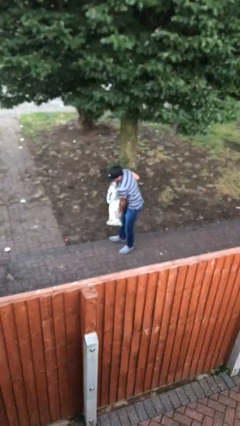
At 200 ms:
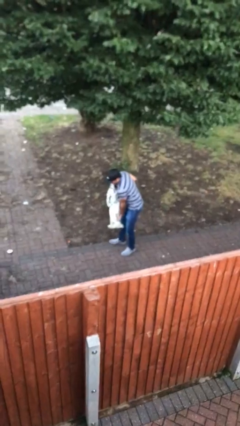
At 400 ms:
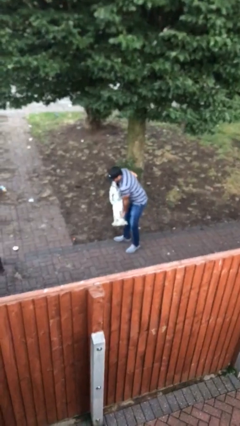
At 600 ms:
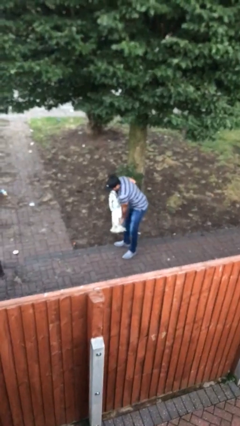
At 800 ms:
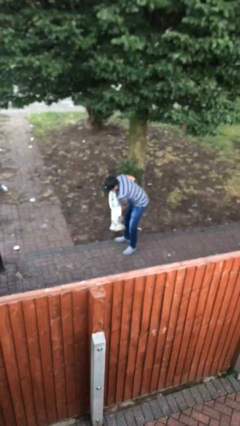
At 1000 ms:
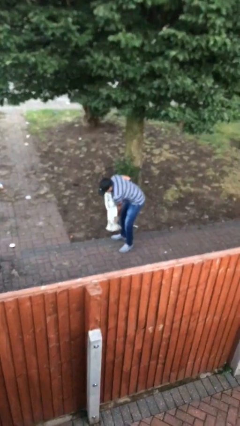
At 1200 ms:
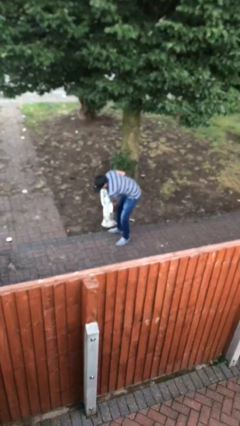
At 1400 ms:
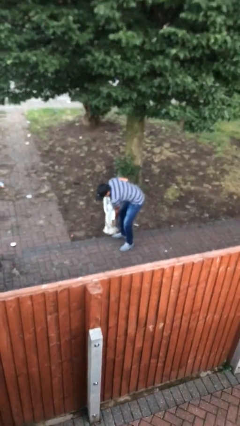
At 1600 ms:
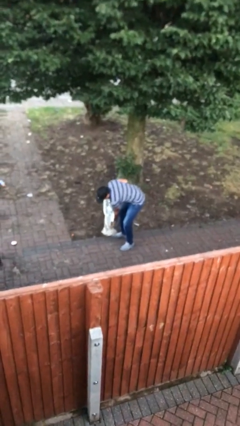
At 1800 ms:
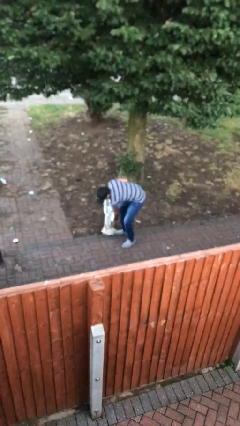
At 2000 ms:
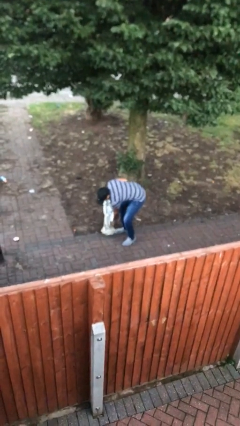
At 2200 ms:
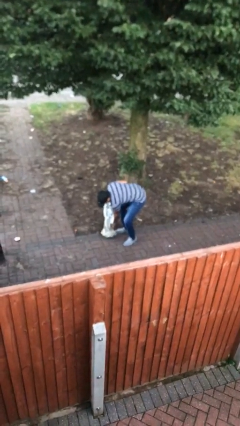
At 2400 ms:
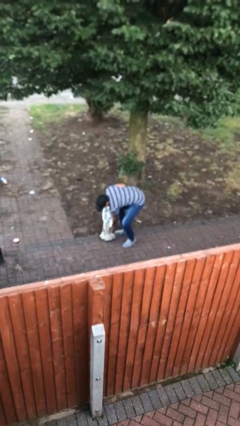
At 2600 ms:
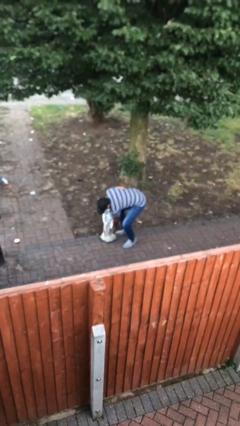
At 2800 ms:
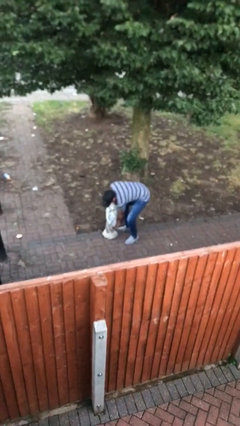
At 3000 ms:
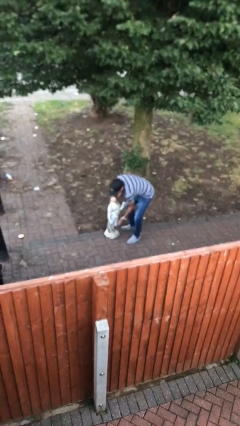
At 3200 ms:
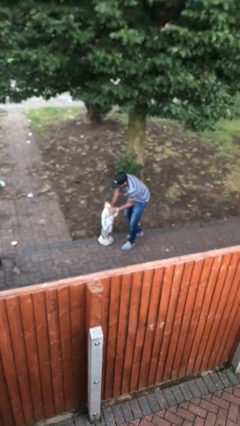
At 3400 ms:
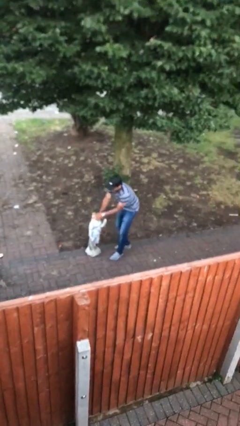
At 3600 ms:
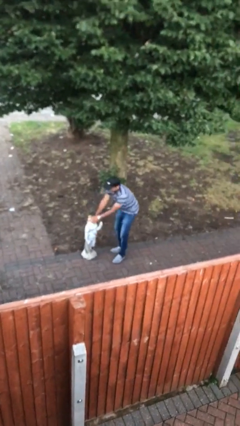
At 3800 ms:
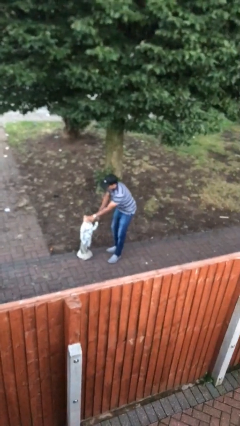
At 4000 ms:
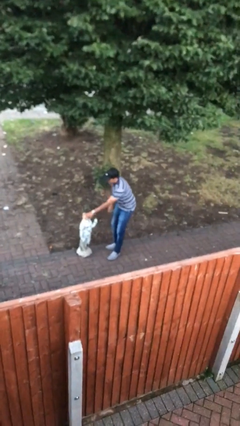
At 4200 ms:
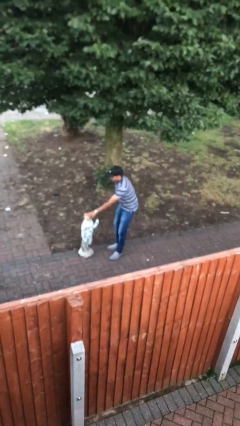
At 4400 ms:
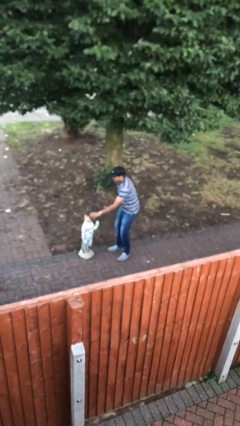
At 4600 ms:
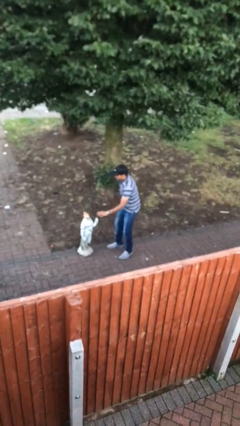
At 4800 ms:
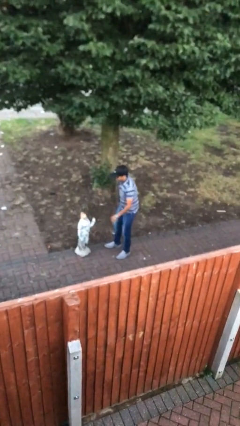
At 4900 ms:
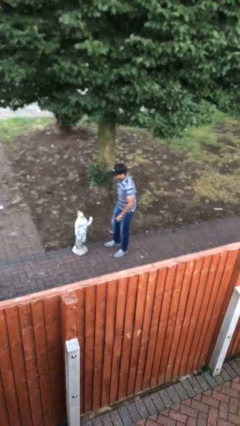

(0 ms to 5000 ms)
person puts down object on floor

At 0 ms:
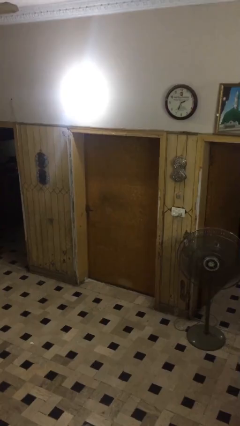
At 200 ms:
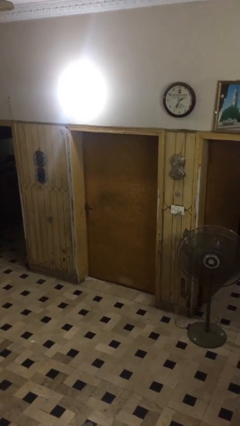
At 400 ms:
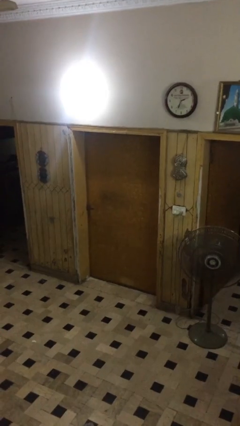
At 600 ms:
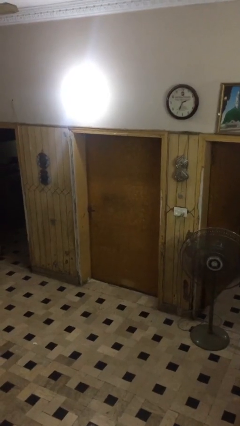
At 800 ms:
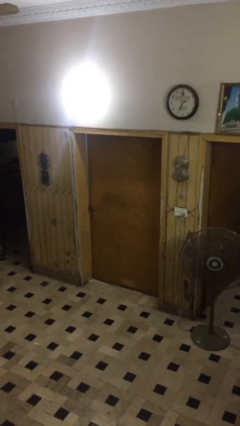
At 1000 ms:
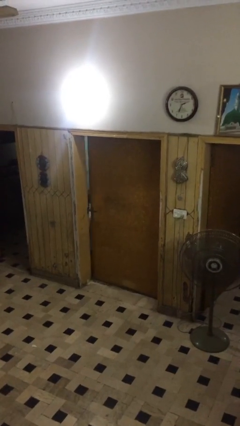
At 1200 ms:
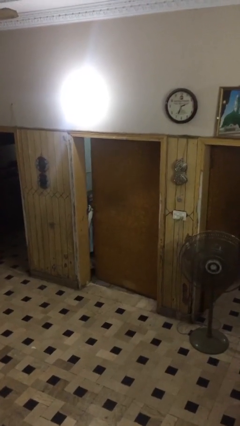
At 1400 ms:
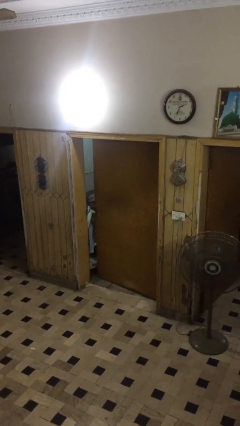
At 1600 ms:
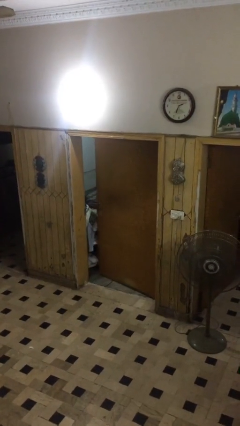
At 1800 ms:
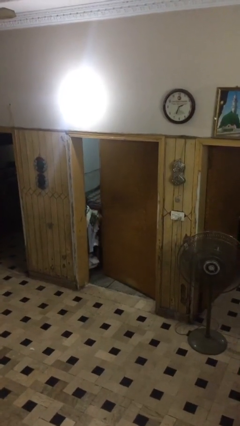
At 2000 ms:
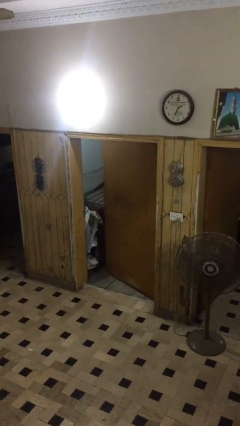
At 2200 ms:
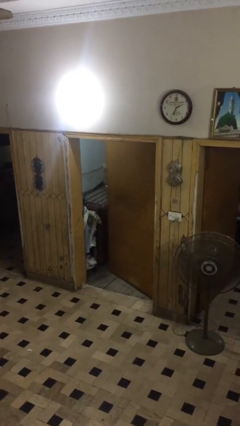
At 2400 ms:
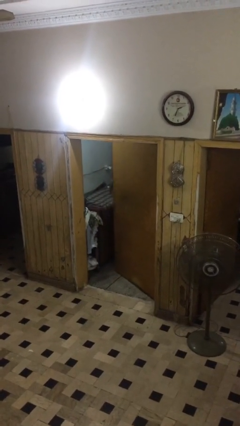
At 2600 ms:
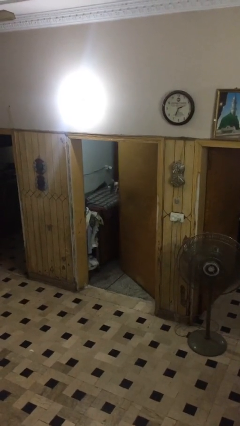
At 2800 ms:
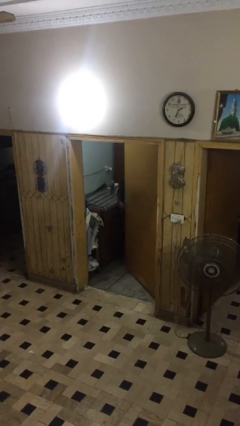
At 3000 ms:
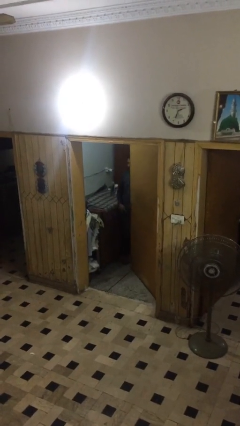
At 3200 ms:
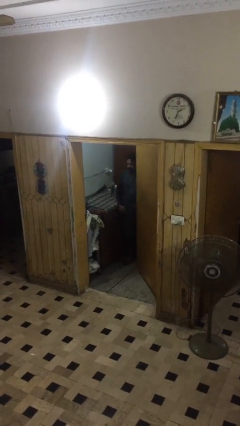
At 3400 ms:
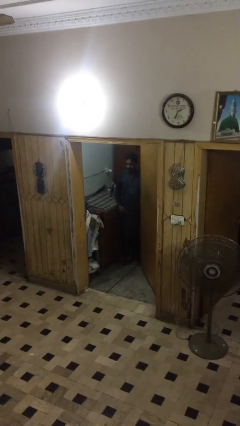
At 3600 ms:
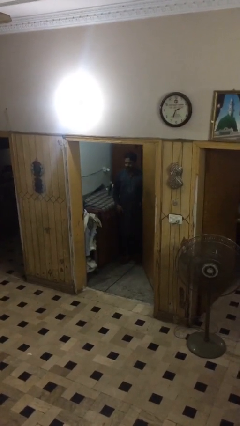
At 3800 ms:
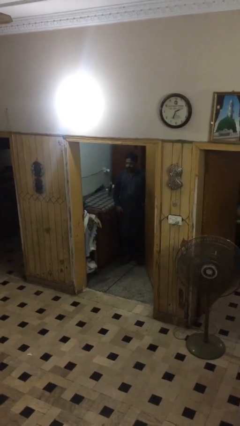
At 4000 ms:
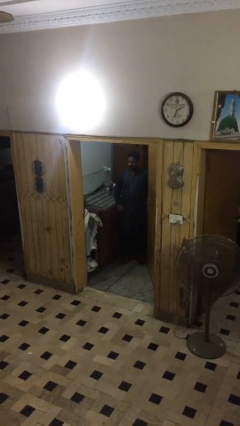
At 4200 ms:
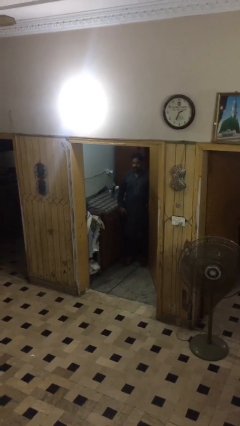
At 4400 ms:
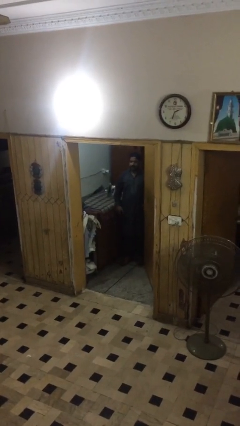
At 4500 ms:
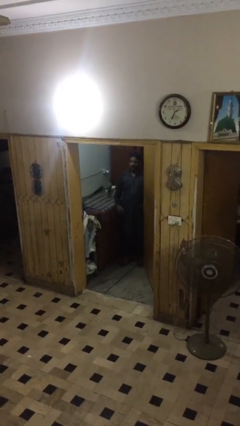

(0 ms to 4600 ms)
person opens facility door

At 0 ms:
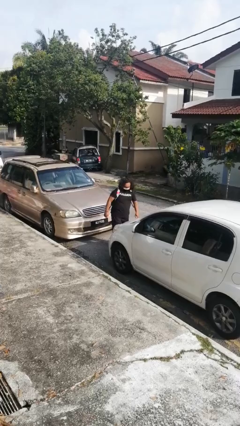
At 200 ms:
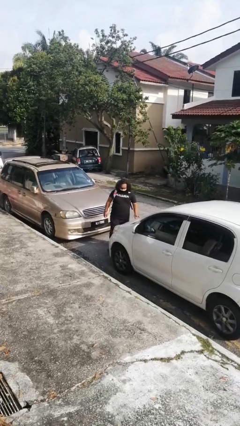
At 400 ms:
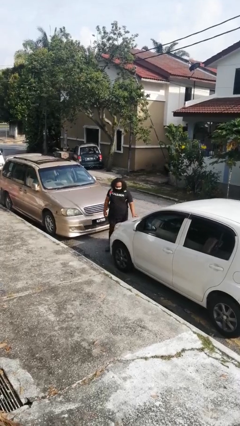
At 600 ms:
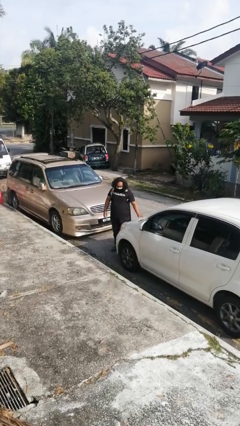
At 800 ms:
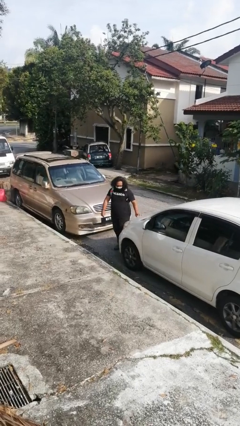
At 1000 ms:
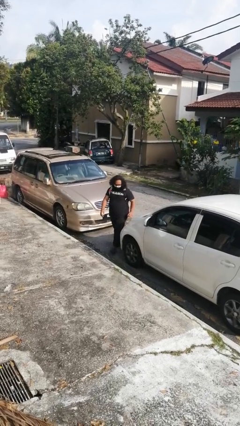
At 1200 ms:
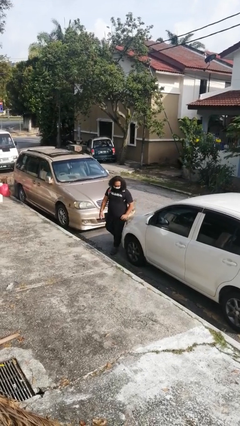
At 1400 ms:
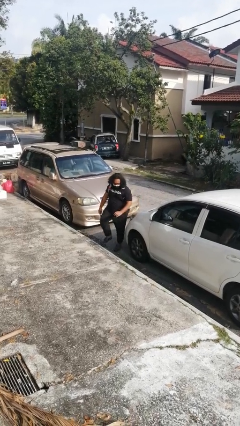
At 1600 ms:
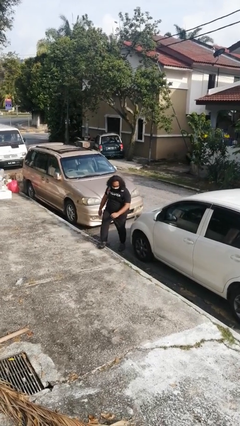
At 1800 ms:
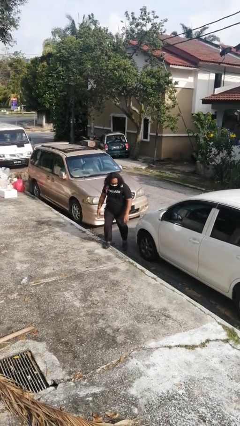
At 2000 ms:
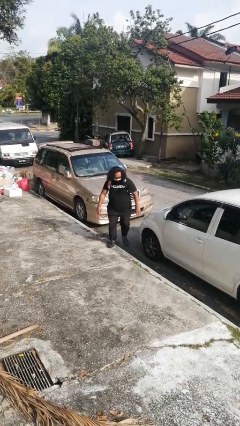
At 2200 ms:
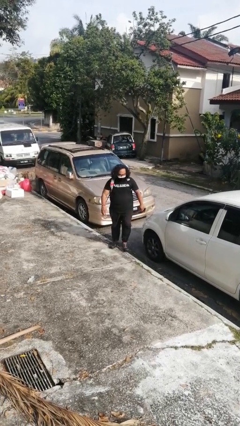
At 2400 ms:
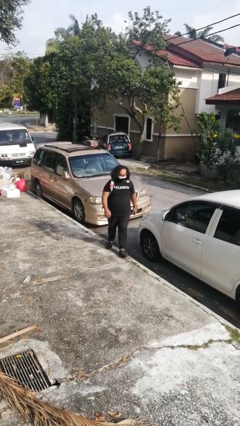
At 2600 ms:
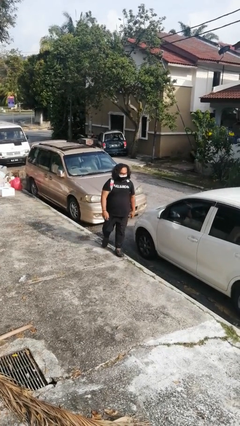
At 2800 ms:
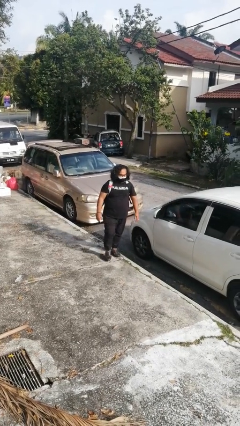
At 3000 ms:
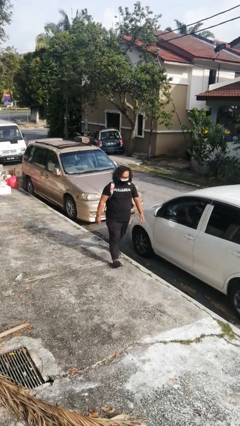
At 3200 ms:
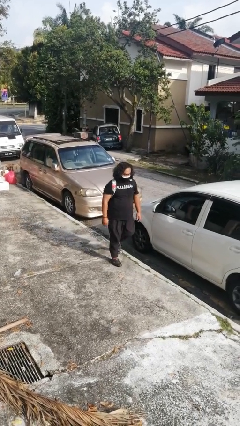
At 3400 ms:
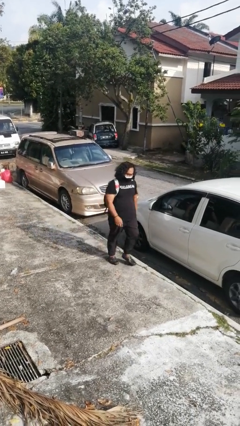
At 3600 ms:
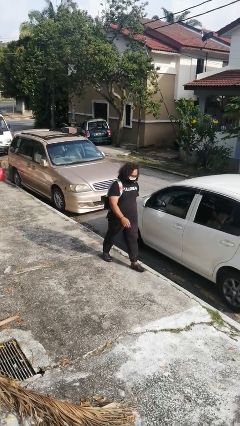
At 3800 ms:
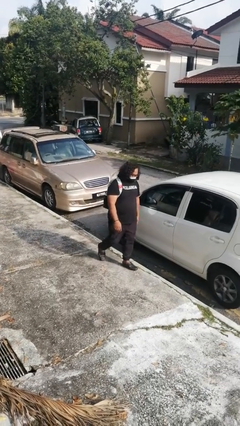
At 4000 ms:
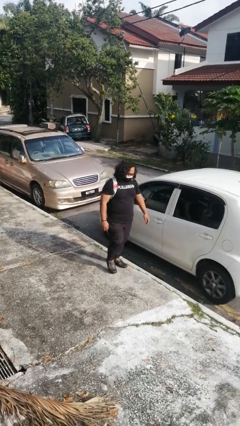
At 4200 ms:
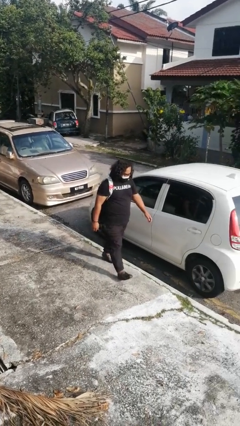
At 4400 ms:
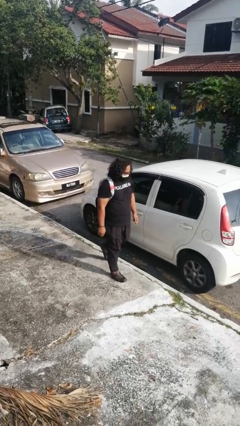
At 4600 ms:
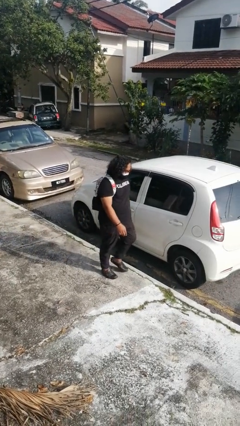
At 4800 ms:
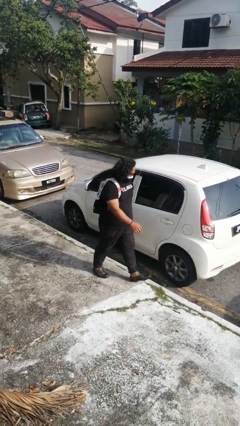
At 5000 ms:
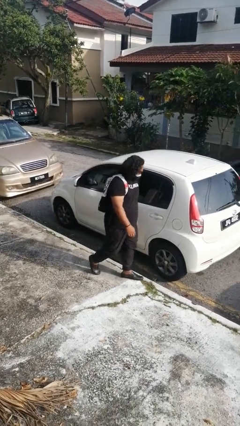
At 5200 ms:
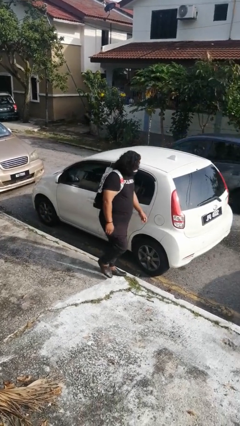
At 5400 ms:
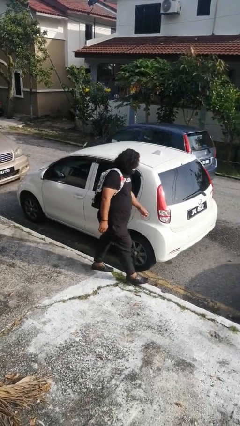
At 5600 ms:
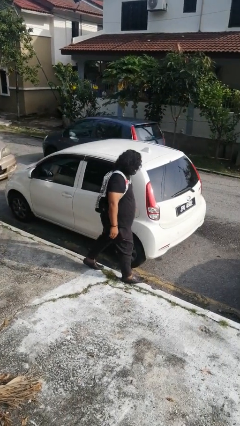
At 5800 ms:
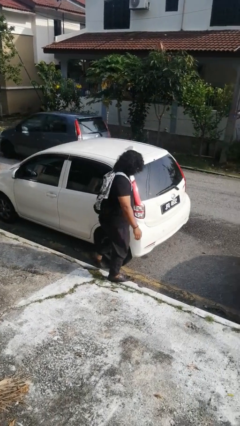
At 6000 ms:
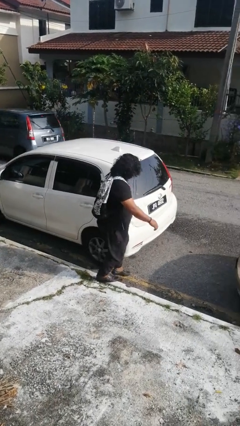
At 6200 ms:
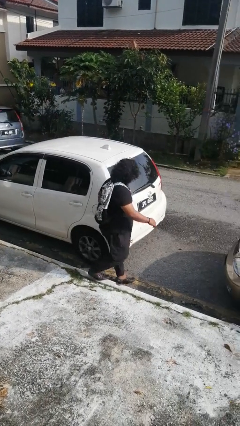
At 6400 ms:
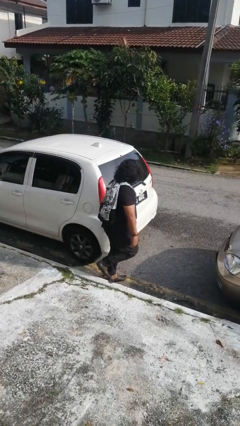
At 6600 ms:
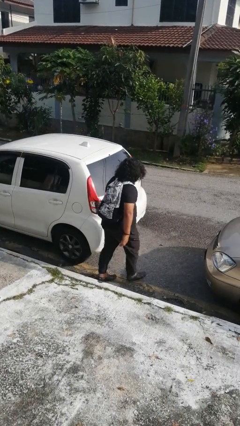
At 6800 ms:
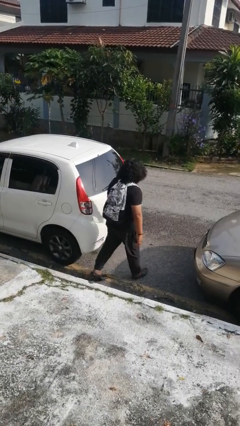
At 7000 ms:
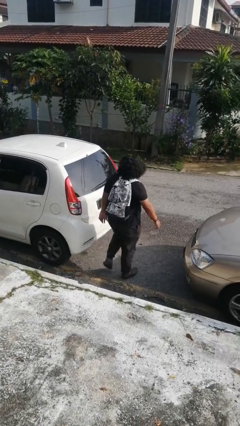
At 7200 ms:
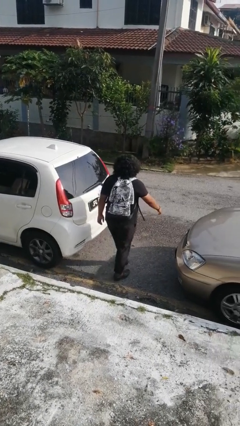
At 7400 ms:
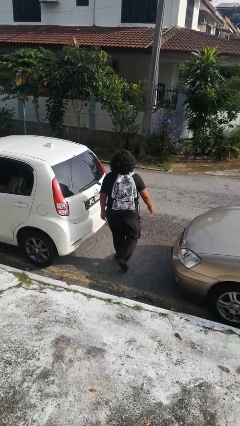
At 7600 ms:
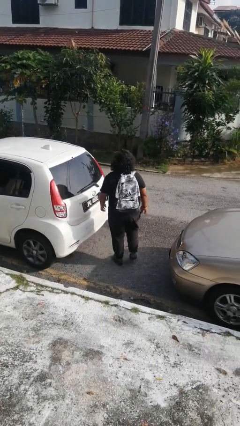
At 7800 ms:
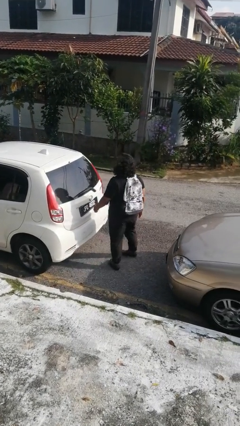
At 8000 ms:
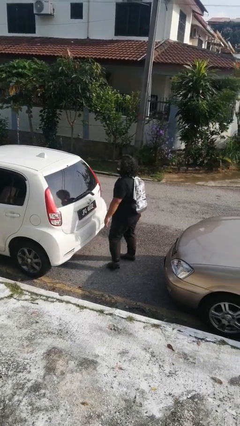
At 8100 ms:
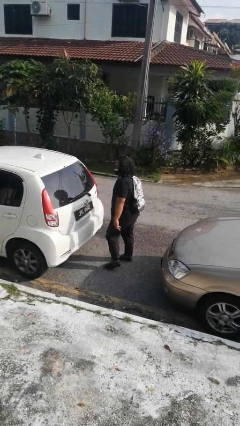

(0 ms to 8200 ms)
person walks around car

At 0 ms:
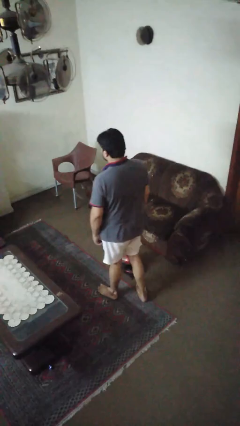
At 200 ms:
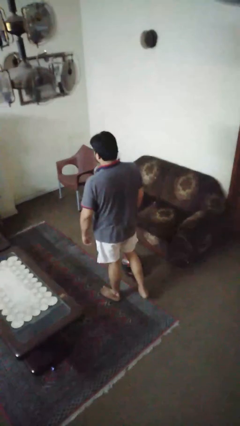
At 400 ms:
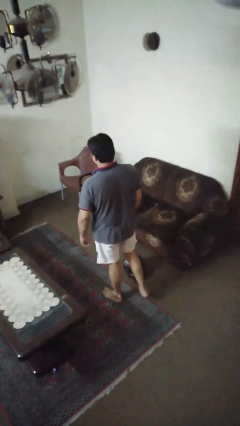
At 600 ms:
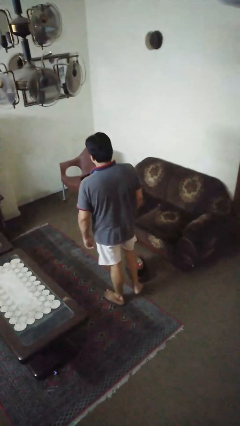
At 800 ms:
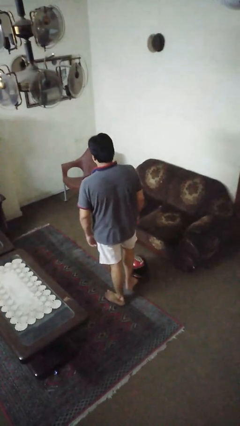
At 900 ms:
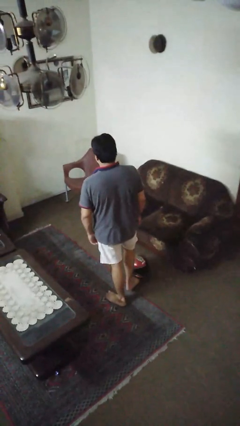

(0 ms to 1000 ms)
person trips on object on floor
